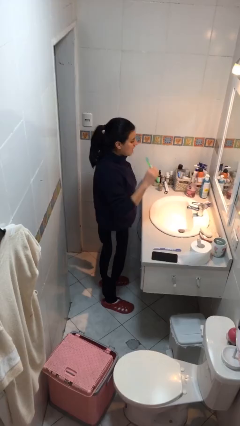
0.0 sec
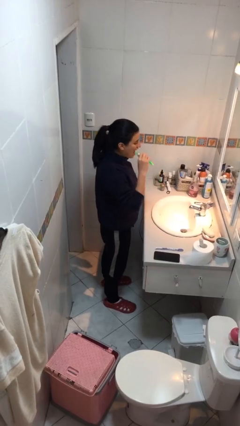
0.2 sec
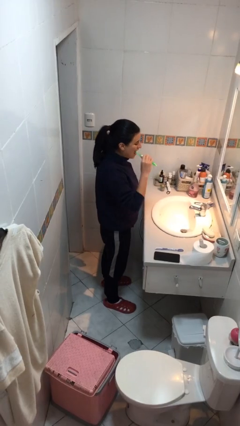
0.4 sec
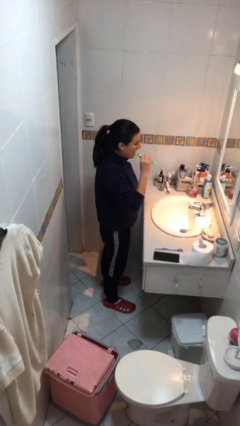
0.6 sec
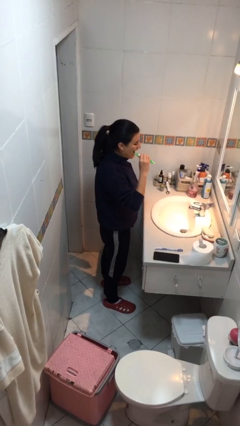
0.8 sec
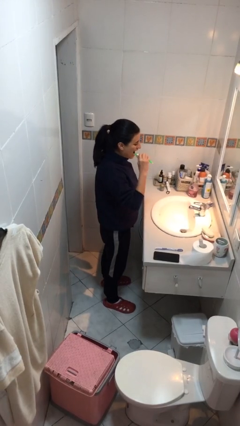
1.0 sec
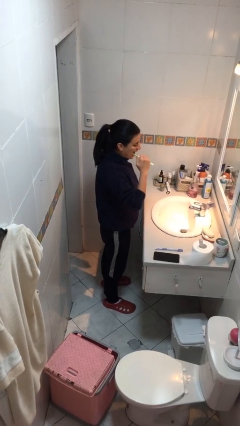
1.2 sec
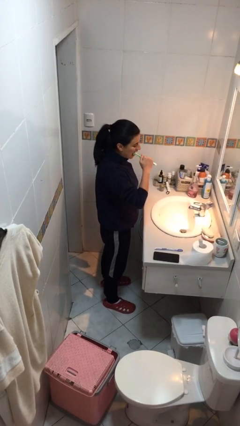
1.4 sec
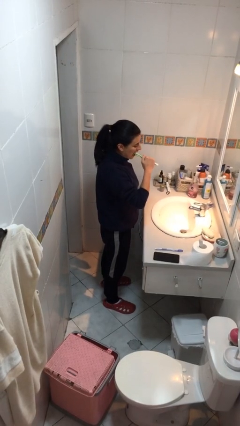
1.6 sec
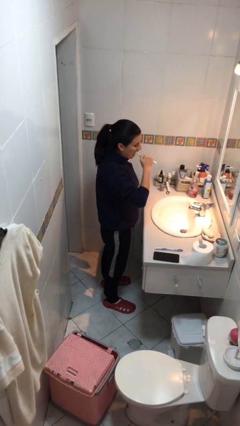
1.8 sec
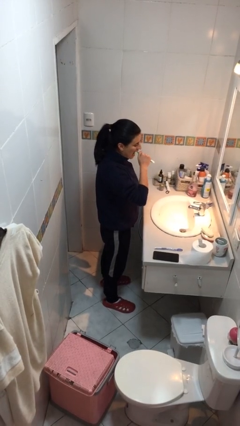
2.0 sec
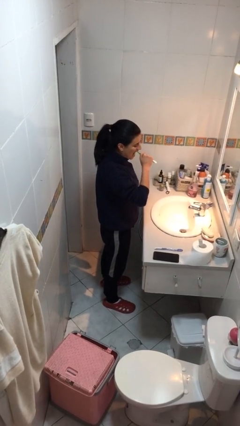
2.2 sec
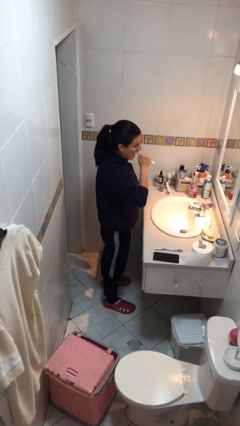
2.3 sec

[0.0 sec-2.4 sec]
person brushes teeth

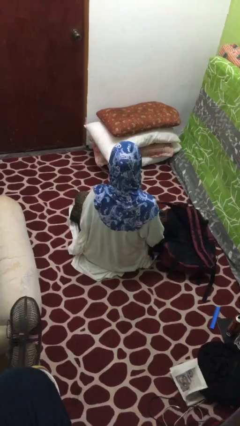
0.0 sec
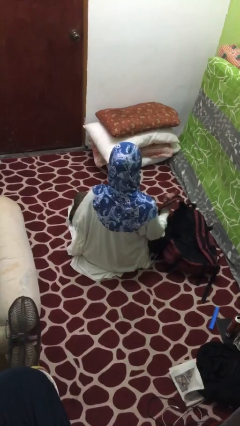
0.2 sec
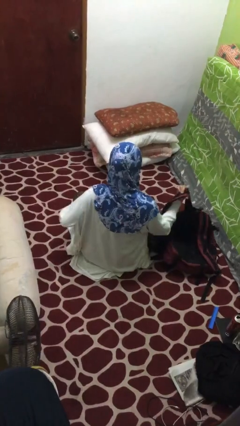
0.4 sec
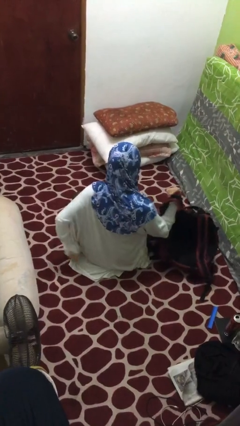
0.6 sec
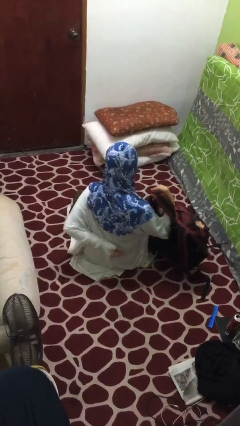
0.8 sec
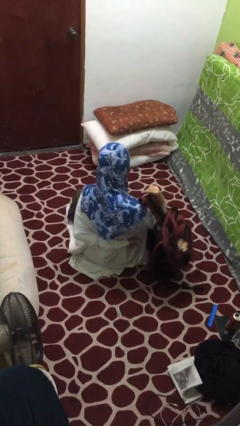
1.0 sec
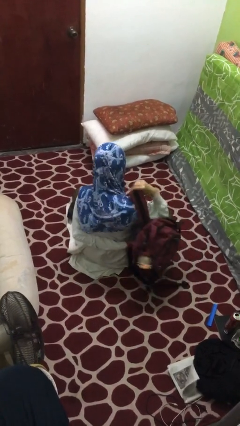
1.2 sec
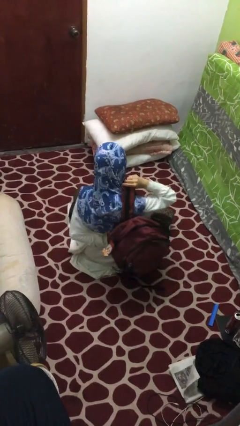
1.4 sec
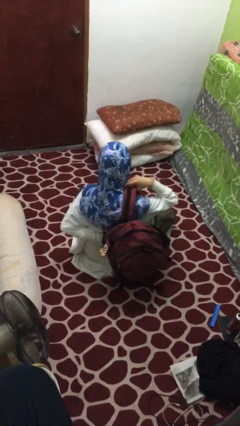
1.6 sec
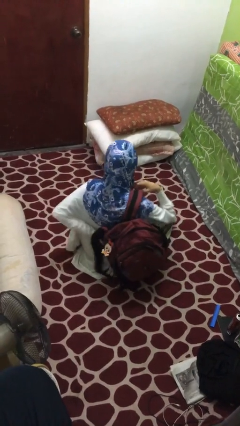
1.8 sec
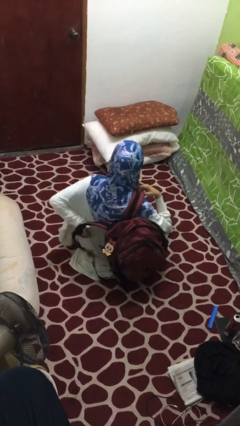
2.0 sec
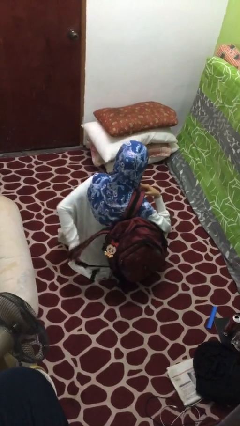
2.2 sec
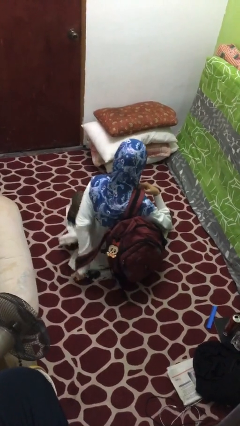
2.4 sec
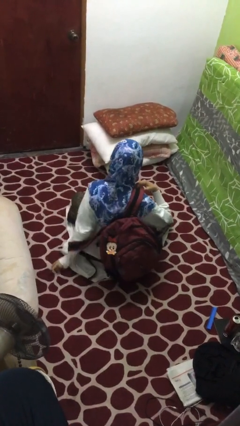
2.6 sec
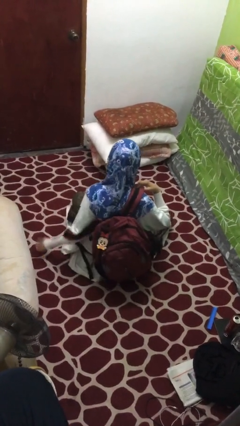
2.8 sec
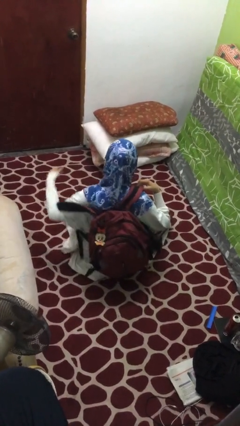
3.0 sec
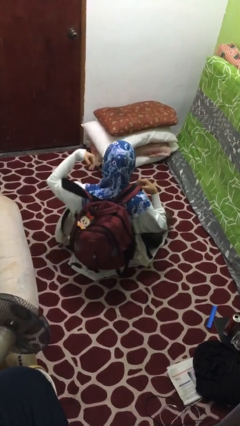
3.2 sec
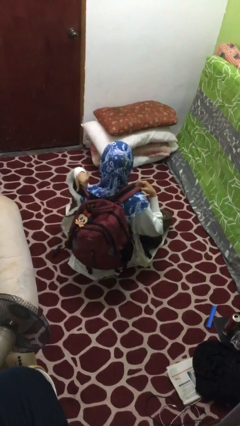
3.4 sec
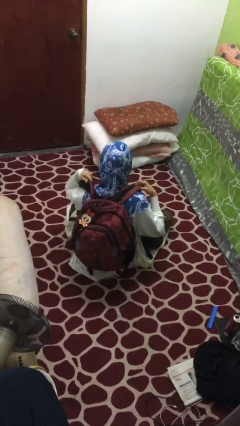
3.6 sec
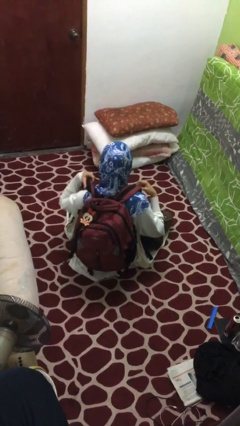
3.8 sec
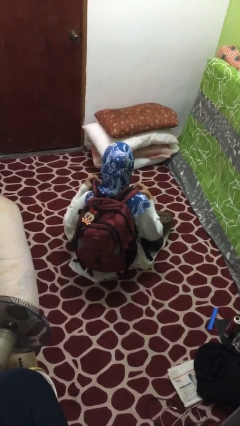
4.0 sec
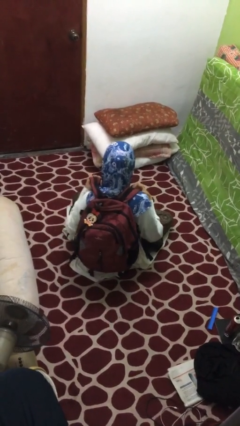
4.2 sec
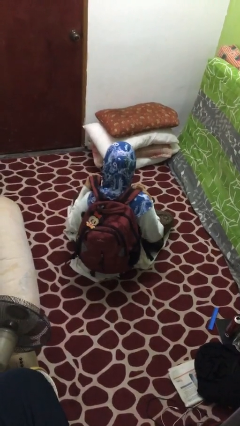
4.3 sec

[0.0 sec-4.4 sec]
person puts on backpack

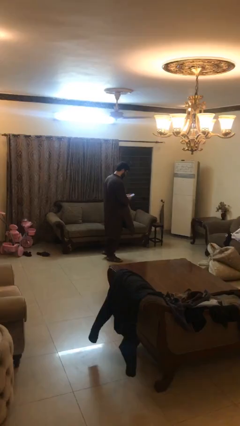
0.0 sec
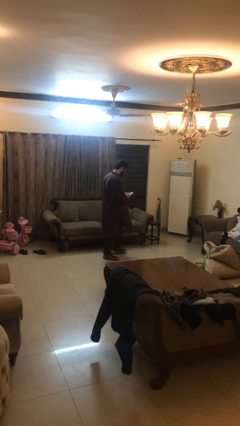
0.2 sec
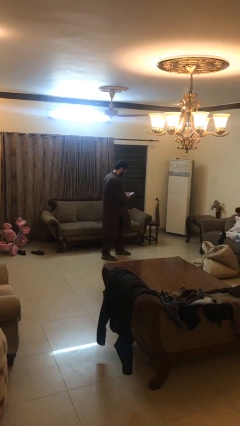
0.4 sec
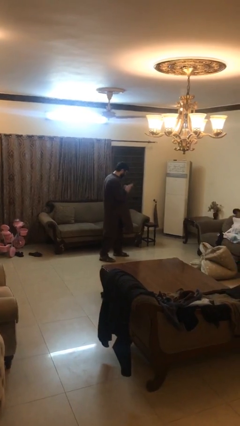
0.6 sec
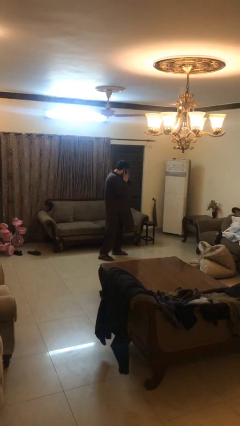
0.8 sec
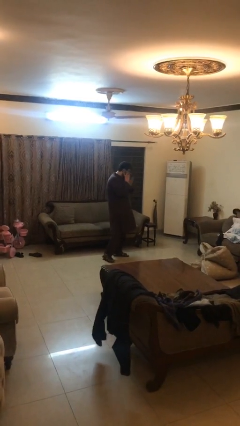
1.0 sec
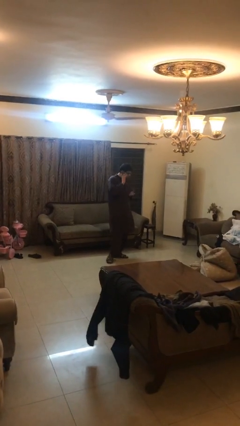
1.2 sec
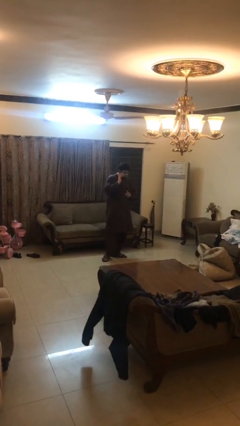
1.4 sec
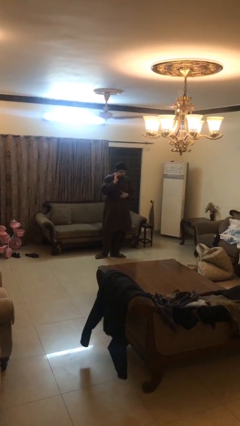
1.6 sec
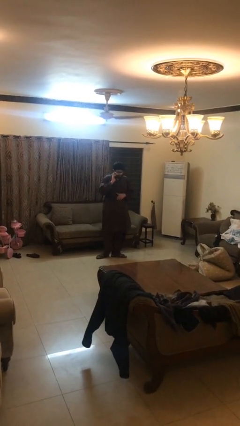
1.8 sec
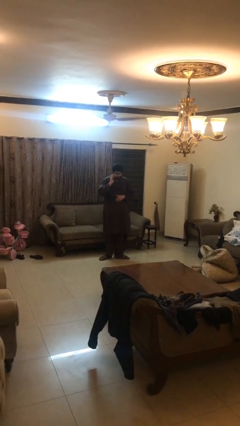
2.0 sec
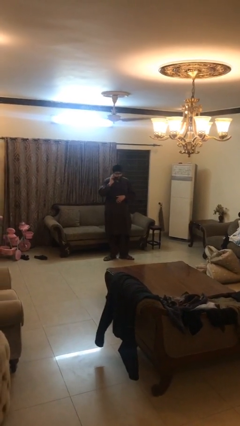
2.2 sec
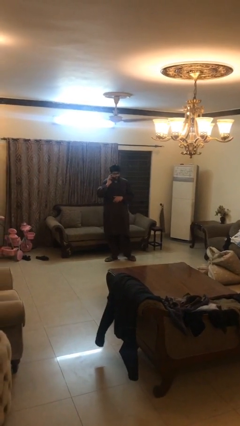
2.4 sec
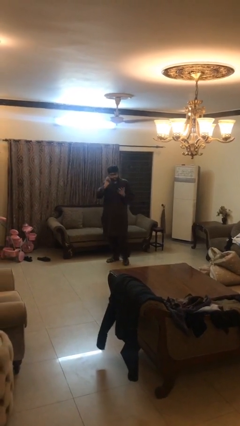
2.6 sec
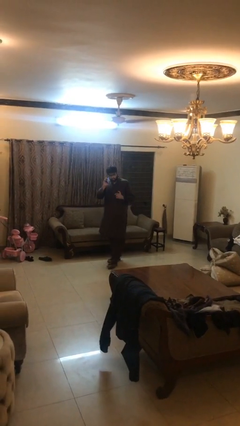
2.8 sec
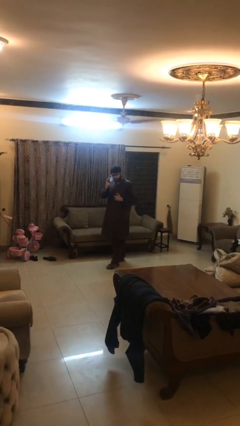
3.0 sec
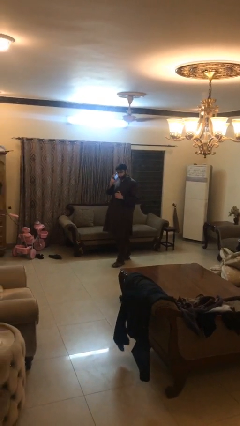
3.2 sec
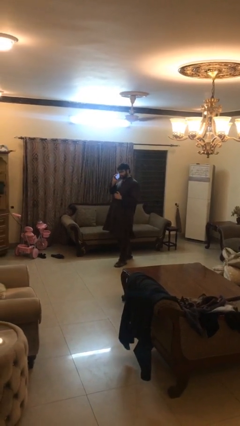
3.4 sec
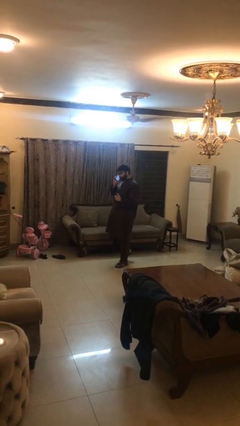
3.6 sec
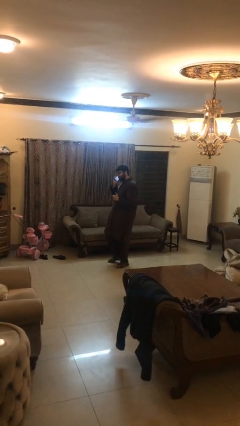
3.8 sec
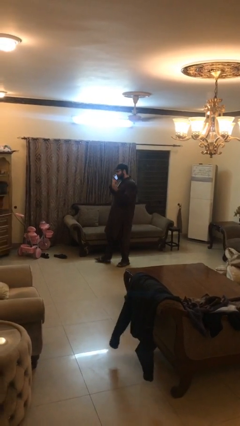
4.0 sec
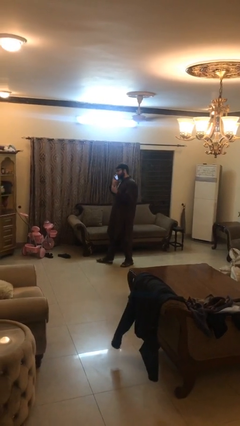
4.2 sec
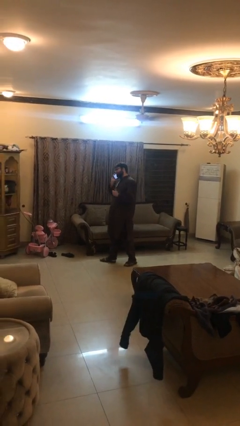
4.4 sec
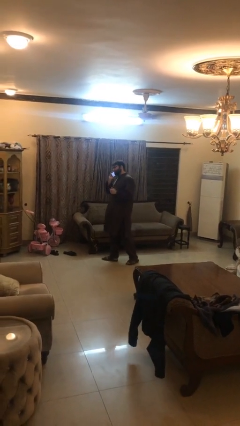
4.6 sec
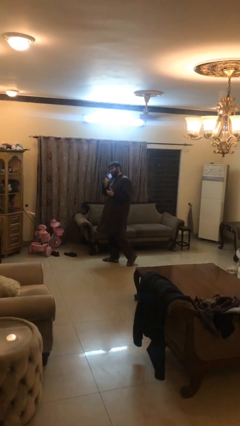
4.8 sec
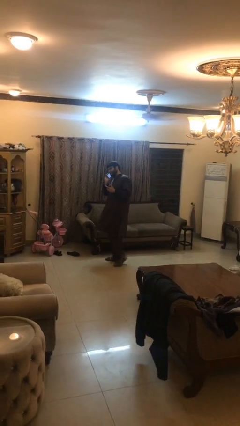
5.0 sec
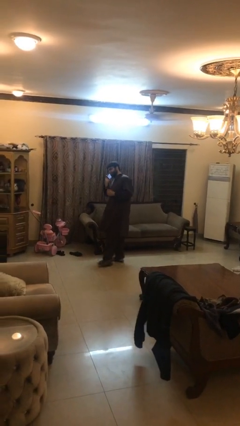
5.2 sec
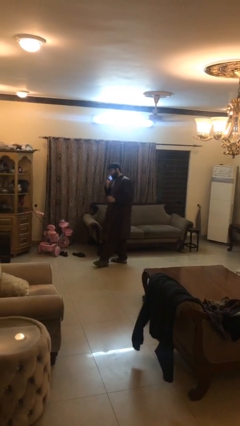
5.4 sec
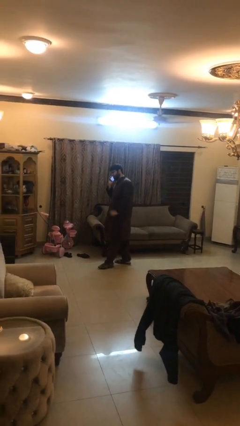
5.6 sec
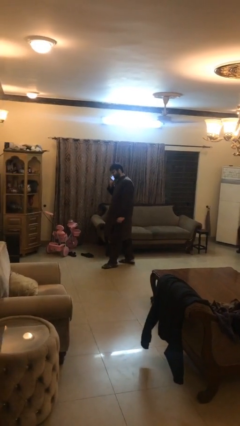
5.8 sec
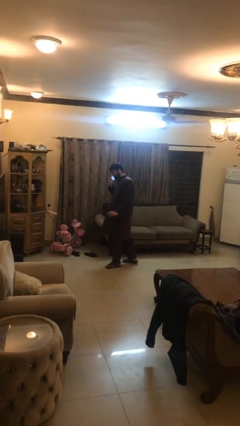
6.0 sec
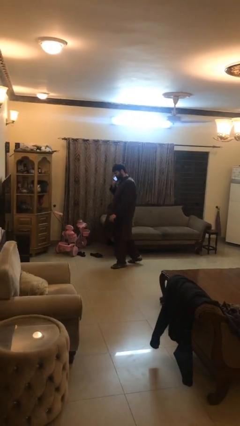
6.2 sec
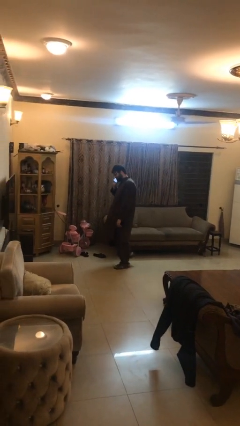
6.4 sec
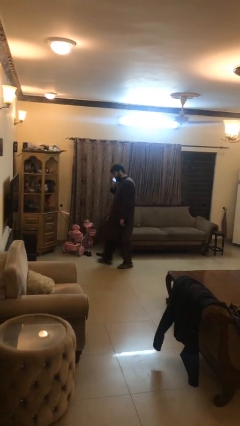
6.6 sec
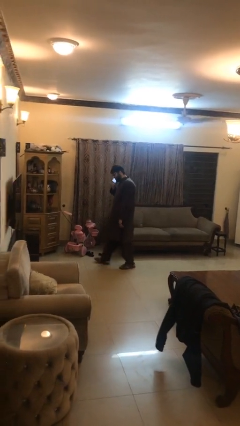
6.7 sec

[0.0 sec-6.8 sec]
person talks on phone

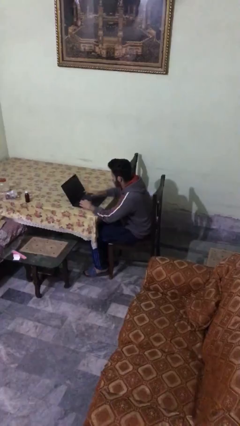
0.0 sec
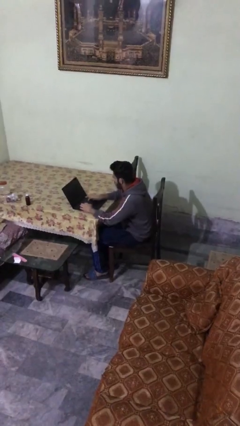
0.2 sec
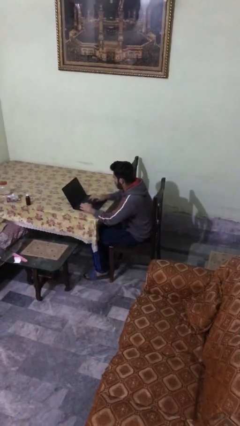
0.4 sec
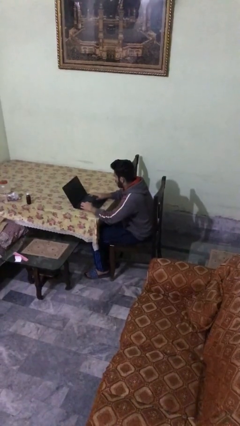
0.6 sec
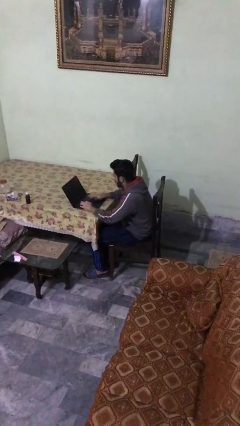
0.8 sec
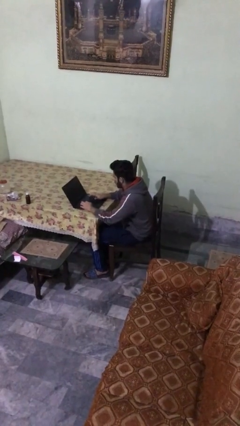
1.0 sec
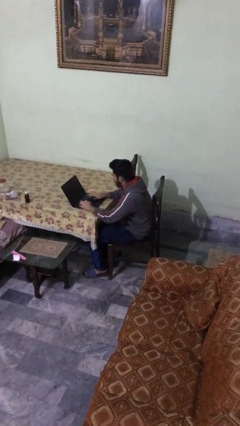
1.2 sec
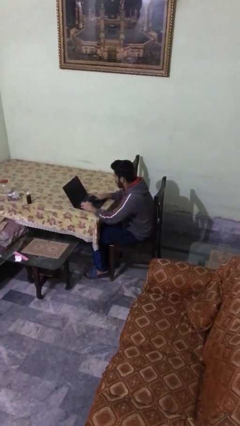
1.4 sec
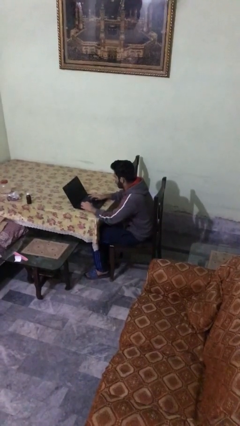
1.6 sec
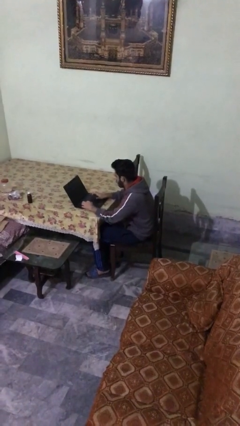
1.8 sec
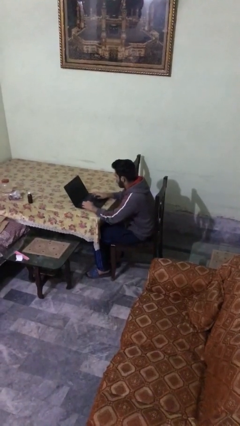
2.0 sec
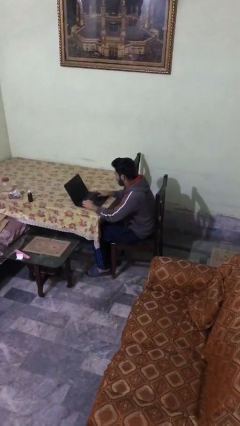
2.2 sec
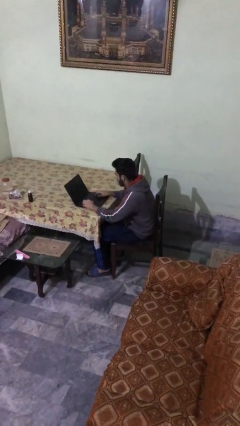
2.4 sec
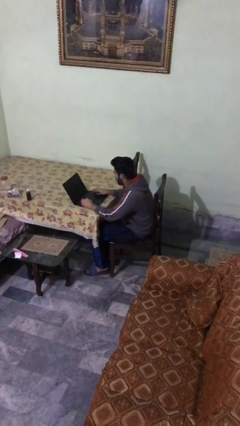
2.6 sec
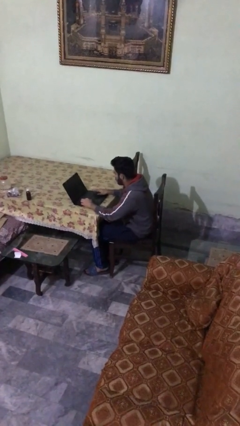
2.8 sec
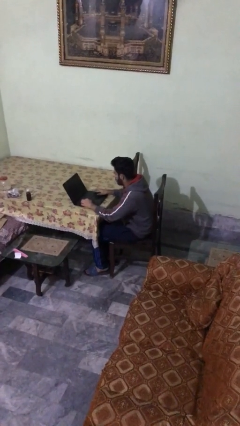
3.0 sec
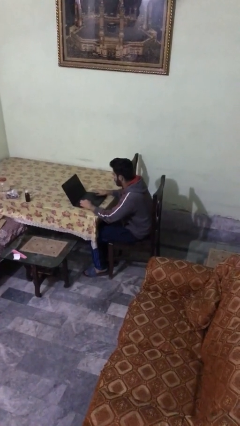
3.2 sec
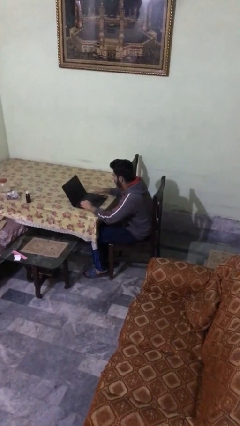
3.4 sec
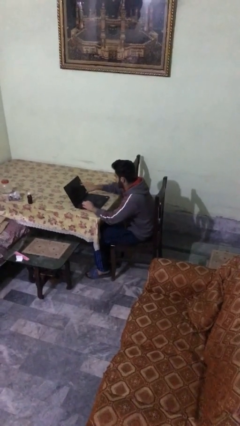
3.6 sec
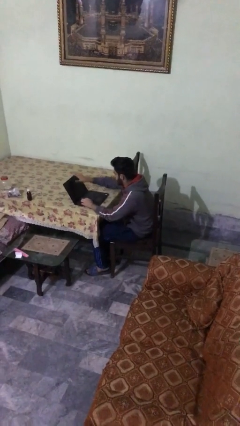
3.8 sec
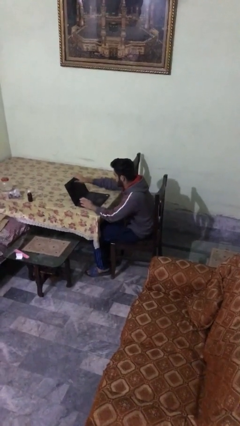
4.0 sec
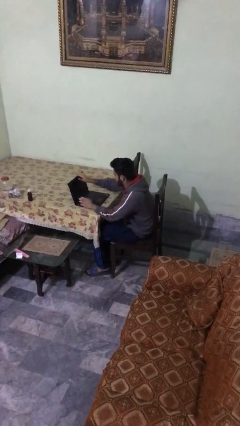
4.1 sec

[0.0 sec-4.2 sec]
person interacts with laptop
